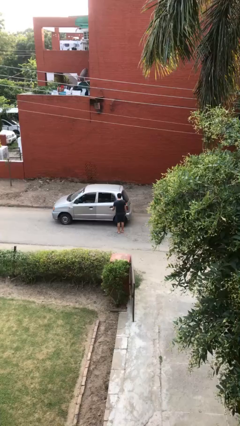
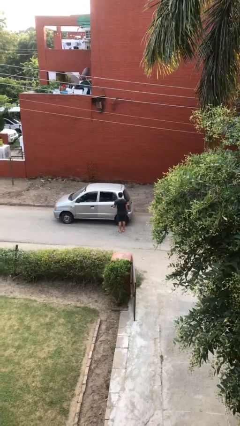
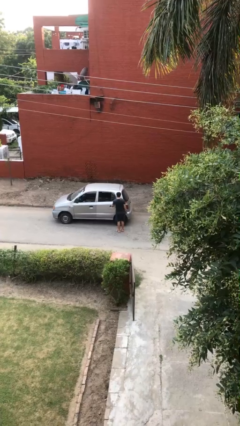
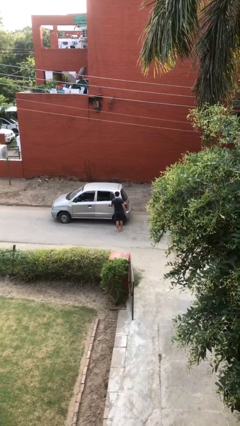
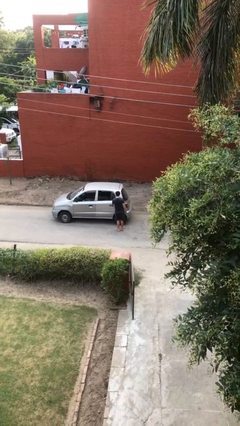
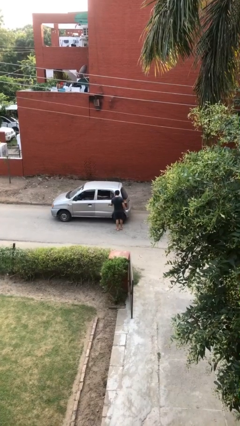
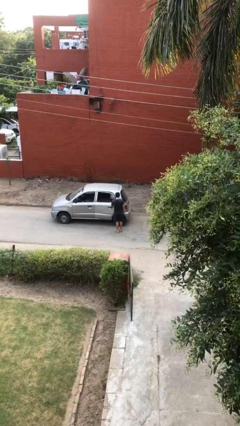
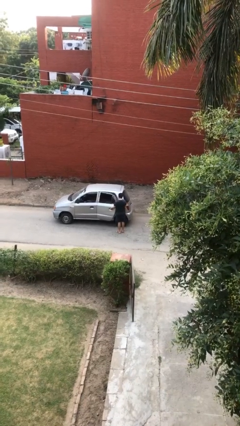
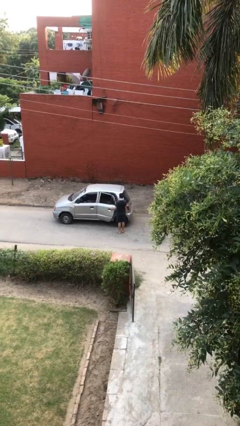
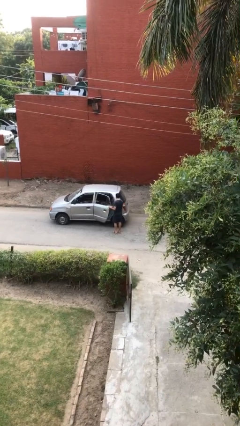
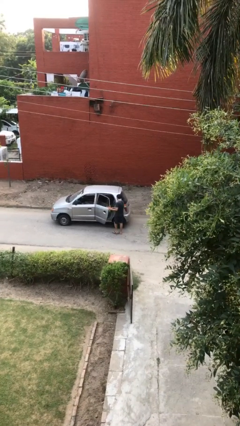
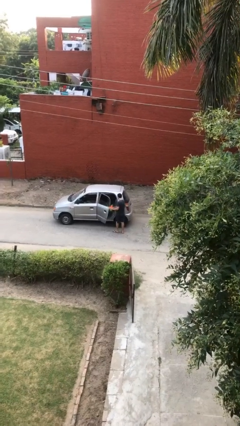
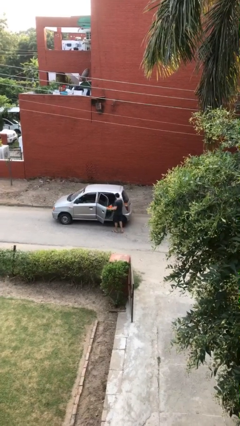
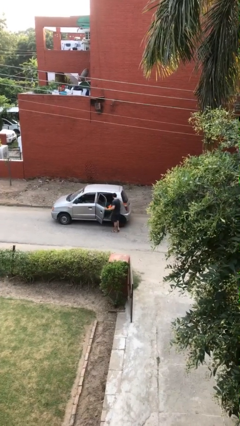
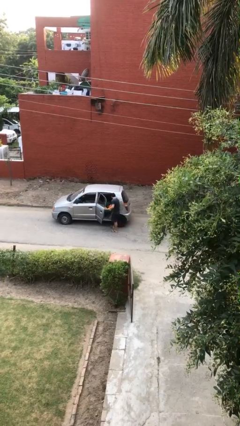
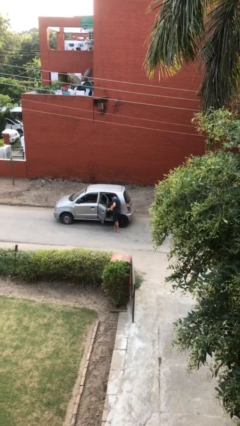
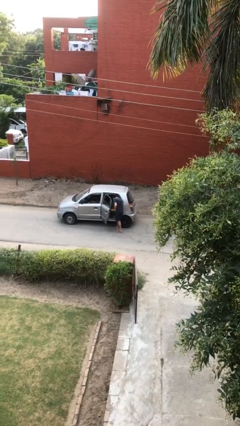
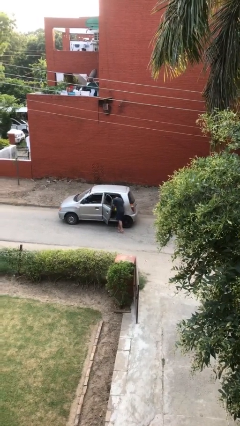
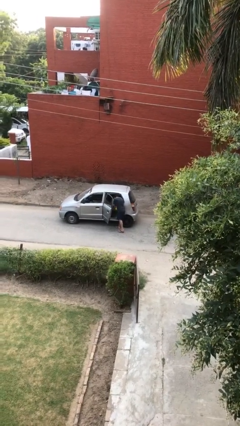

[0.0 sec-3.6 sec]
person opens car door

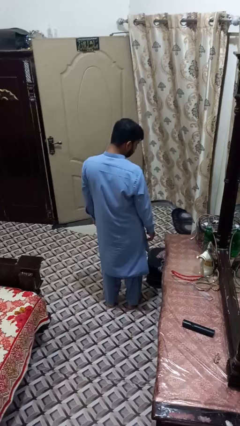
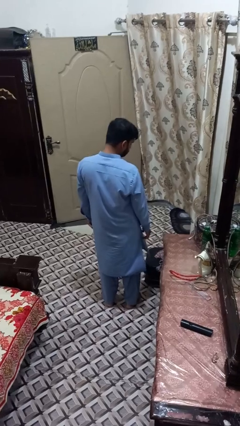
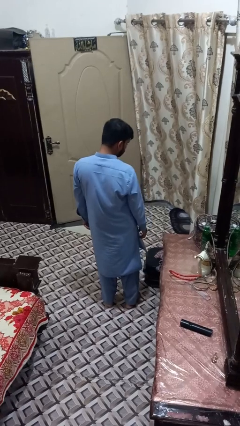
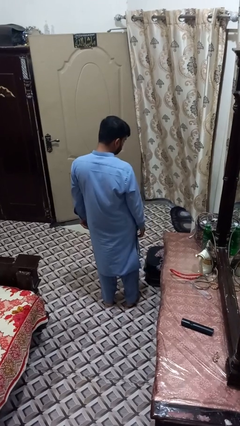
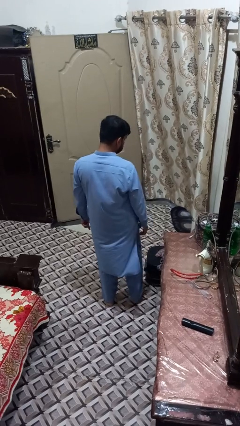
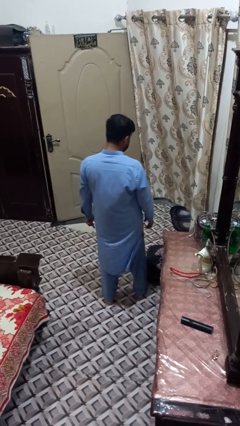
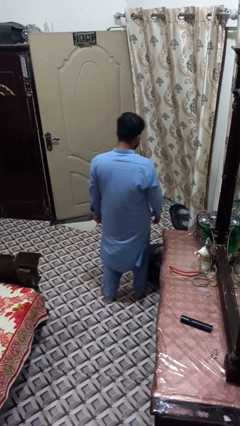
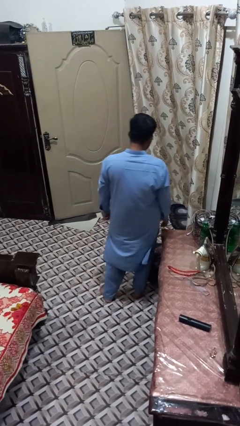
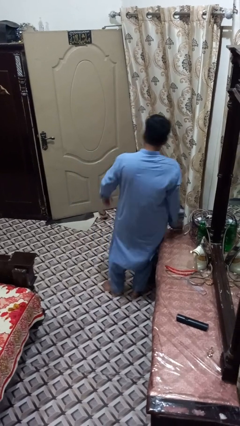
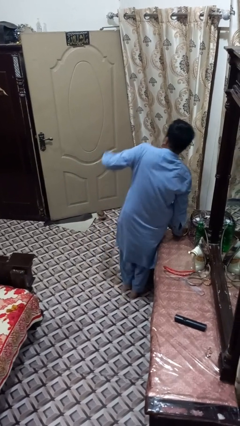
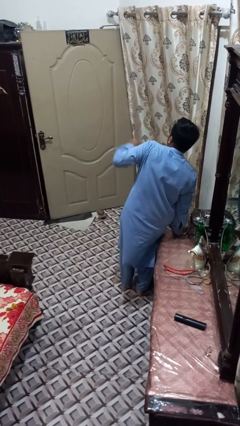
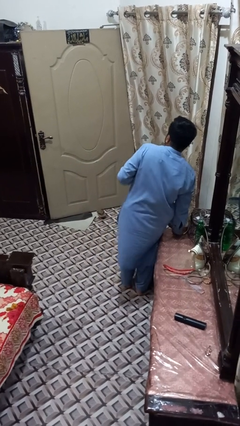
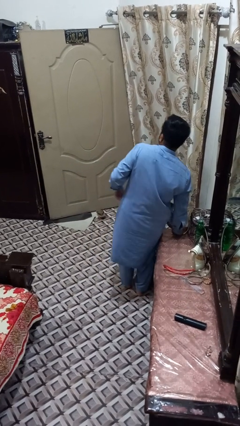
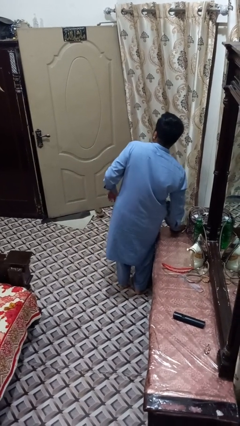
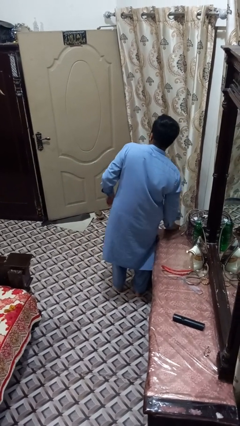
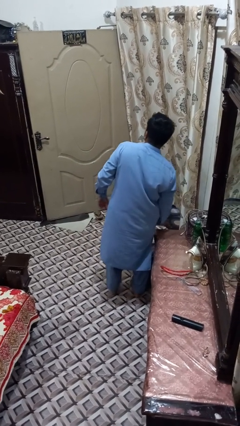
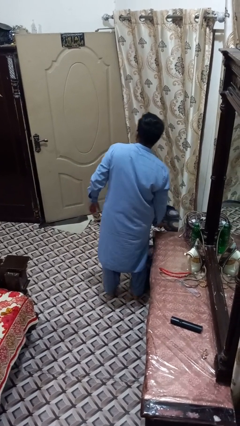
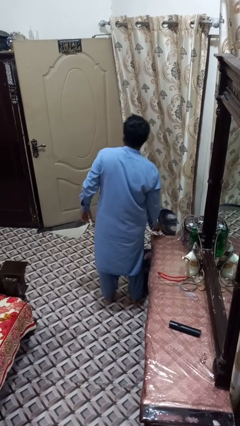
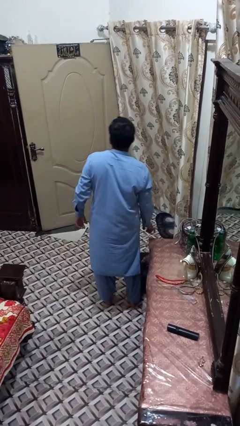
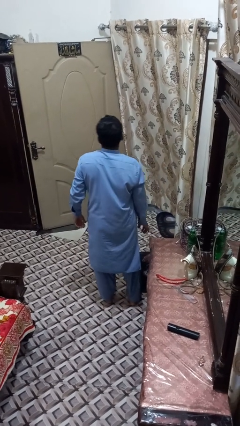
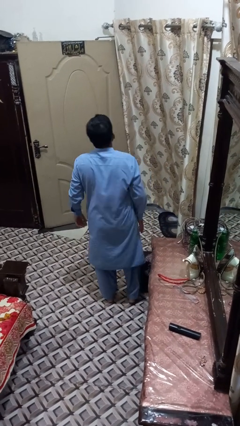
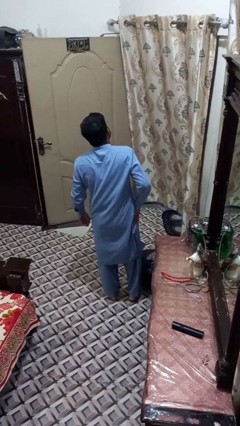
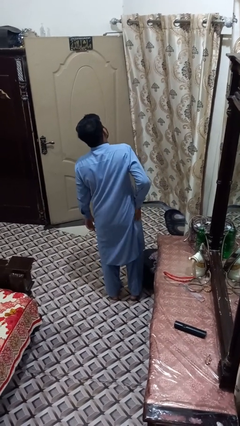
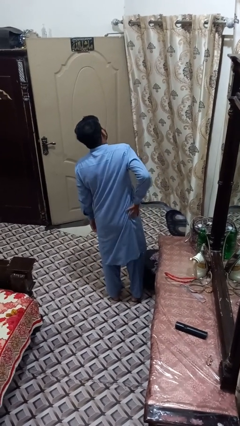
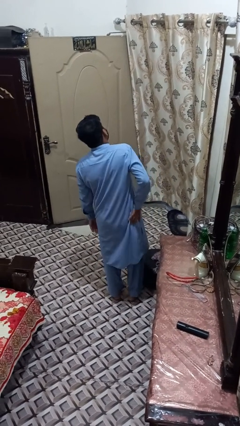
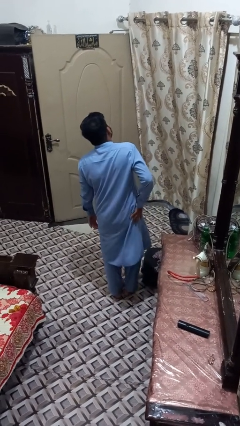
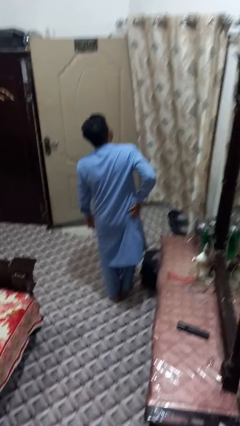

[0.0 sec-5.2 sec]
person bumps into table

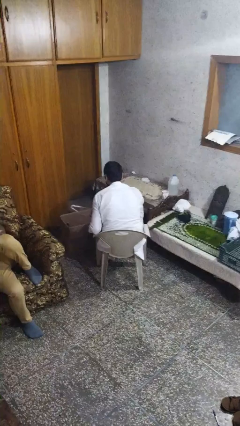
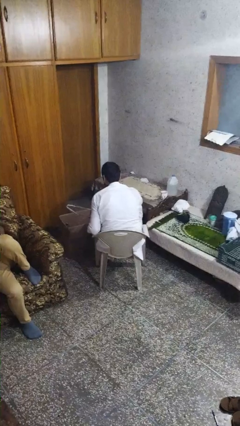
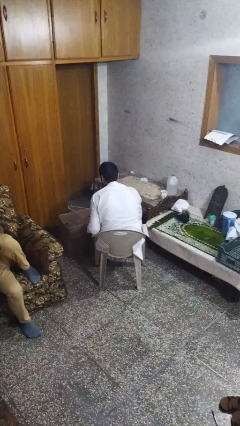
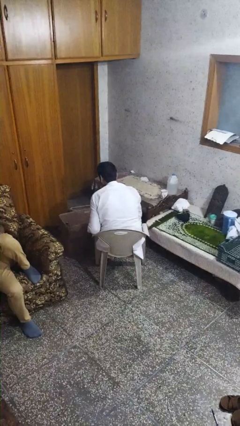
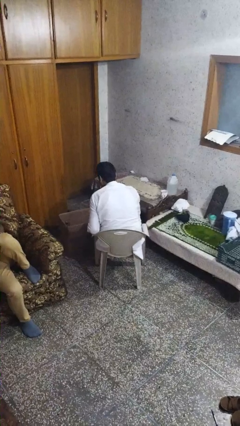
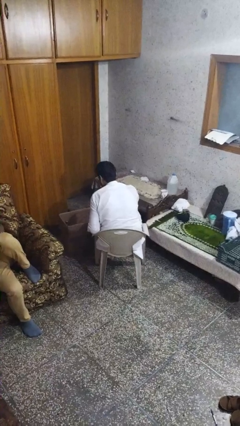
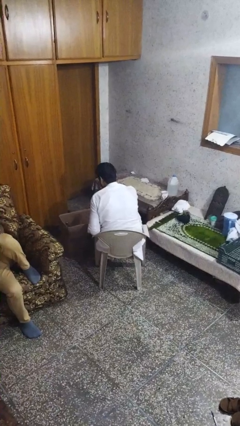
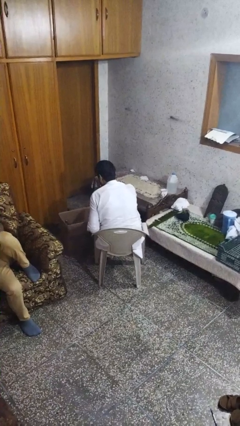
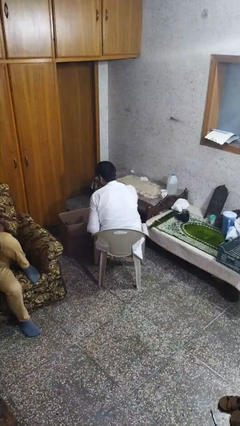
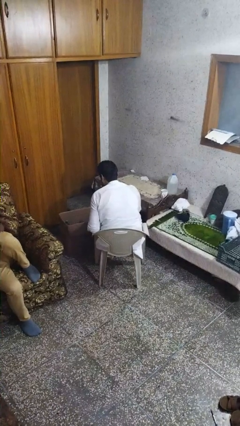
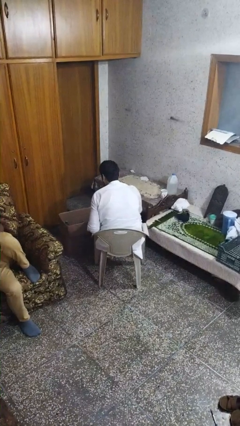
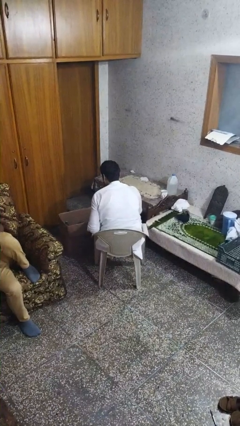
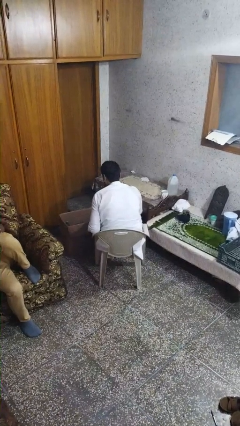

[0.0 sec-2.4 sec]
person puts object into box

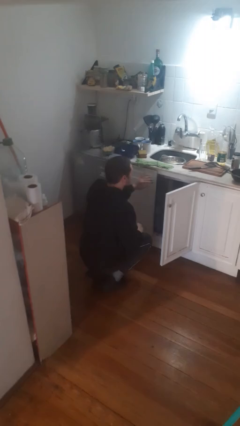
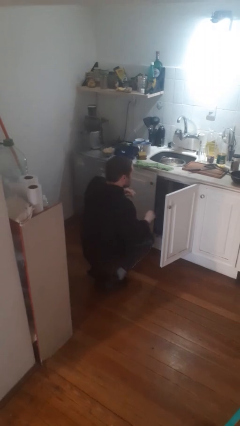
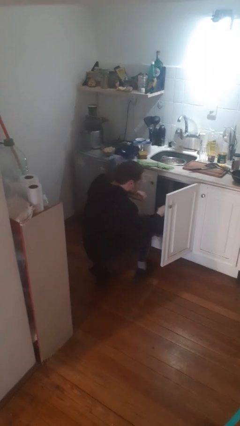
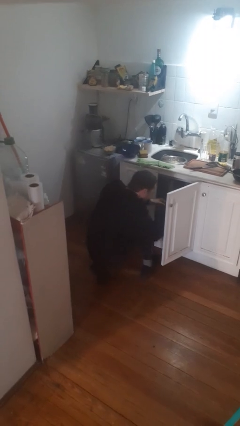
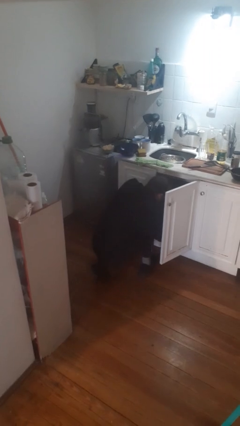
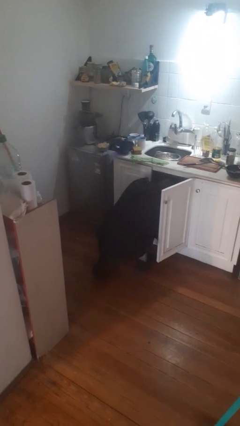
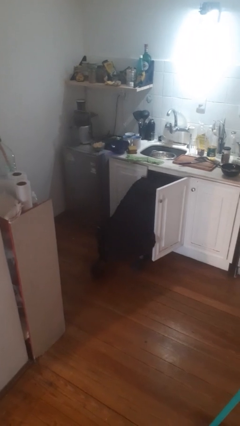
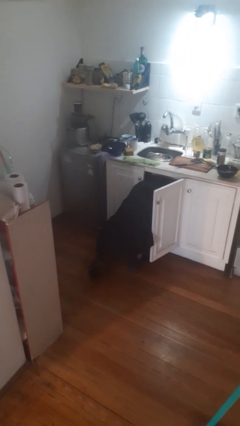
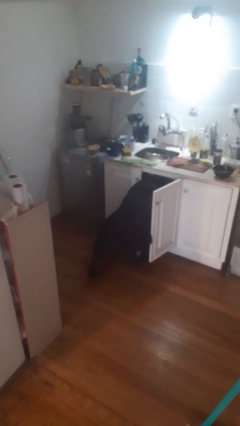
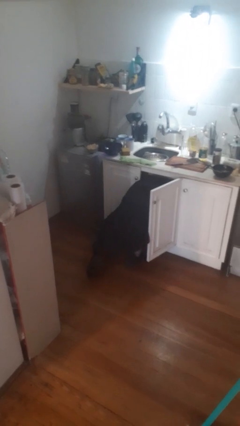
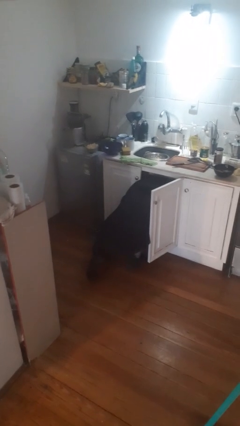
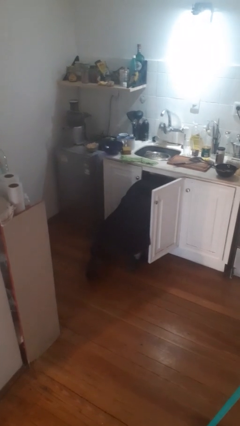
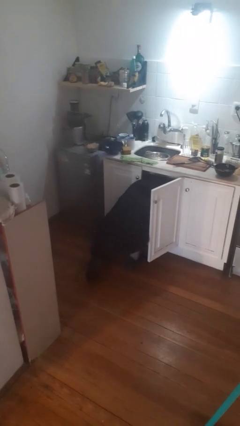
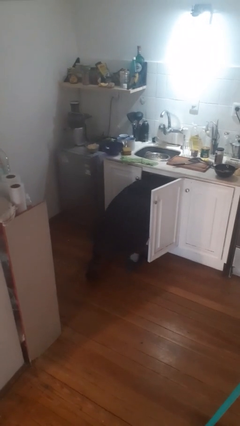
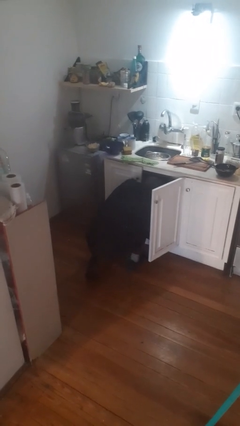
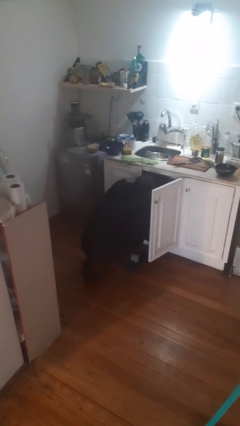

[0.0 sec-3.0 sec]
person searches in cabinet

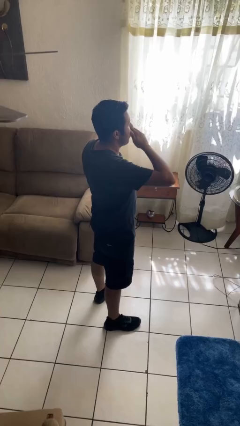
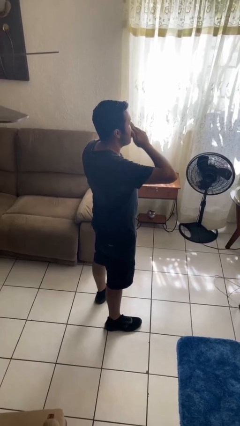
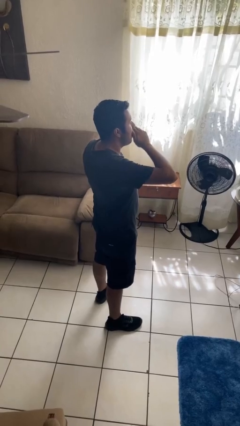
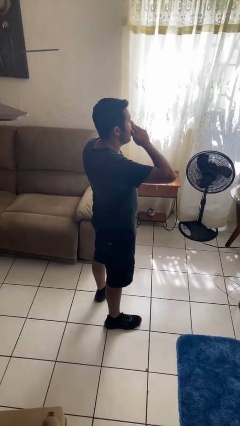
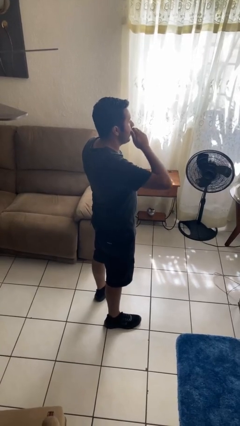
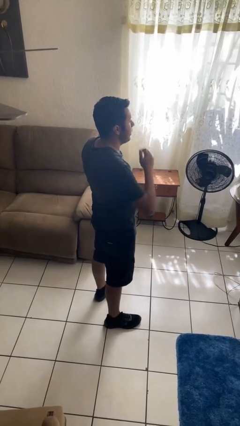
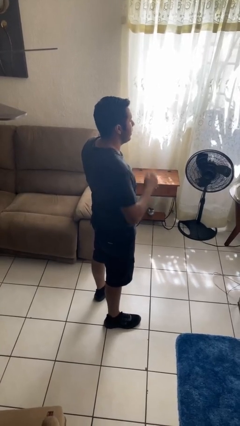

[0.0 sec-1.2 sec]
person yawns

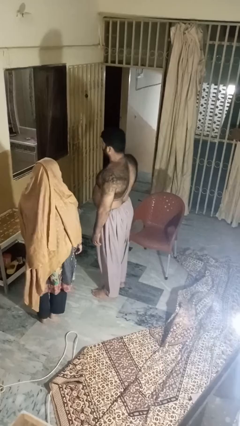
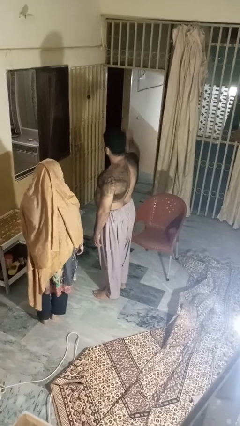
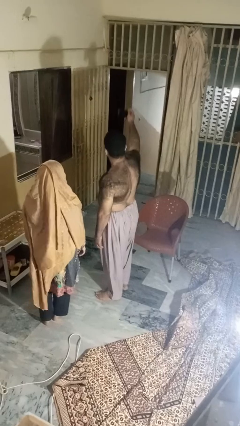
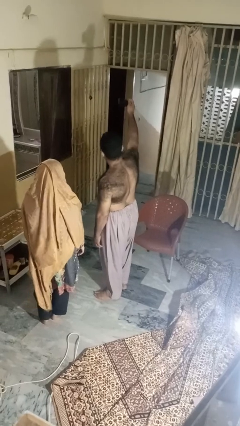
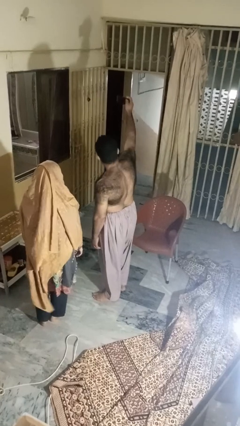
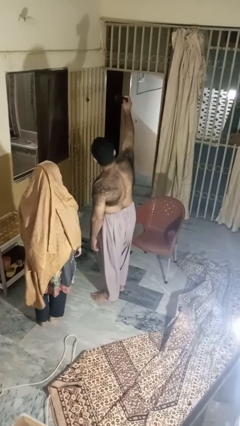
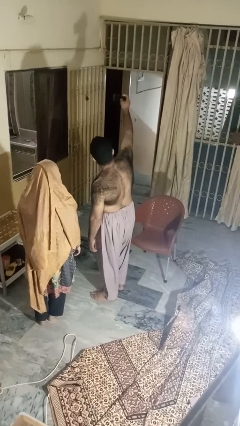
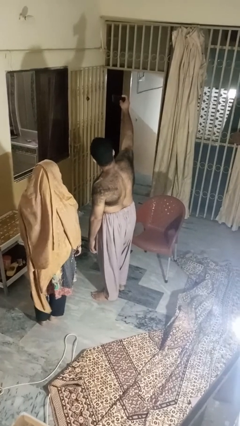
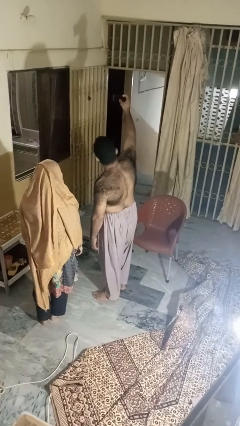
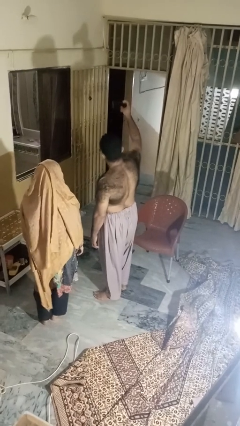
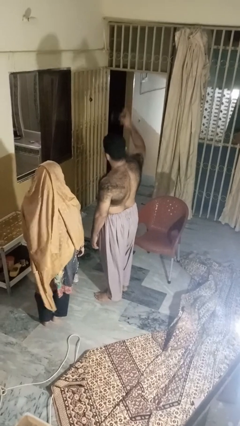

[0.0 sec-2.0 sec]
person takes selfie with person
